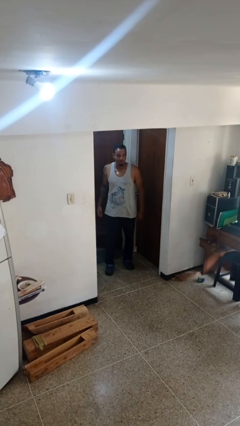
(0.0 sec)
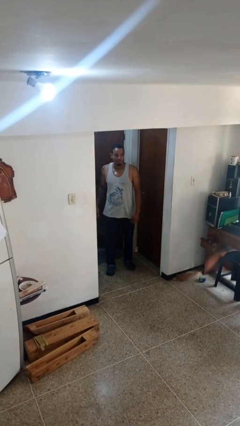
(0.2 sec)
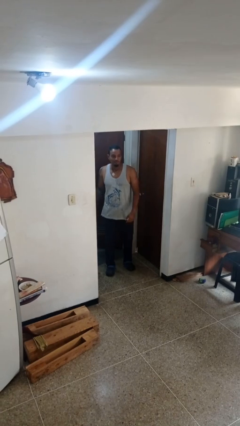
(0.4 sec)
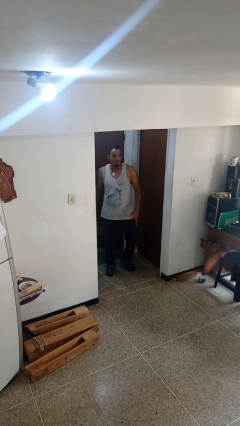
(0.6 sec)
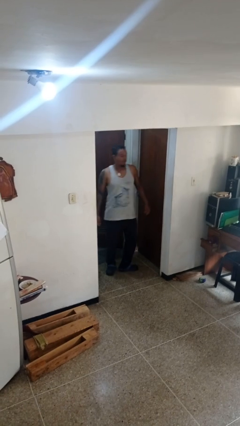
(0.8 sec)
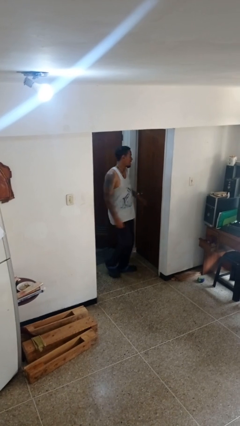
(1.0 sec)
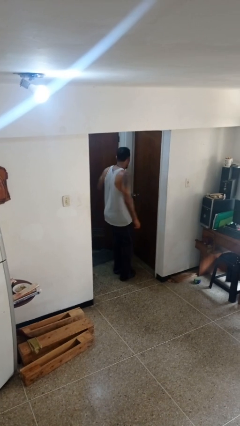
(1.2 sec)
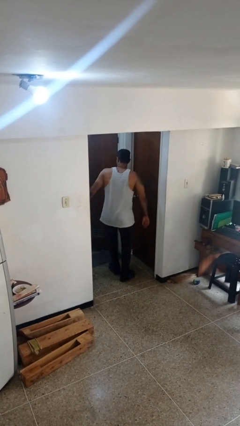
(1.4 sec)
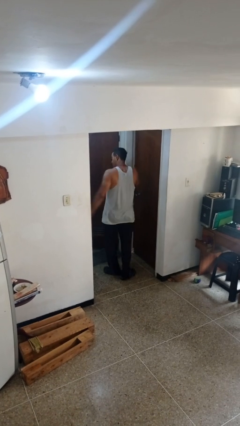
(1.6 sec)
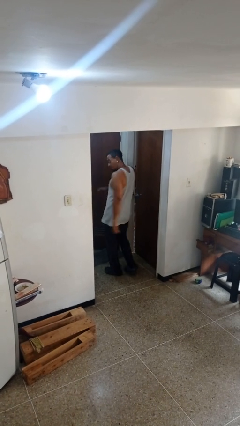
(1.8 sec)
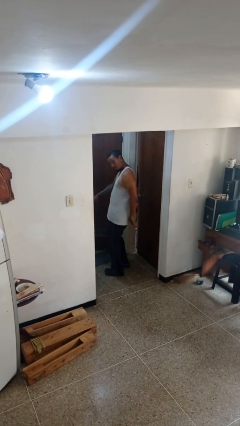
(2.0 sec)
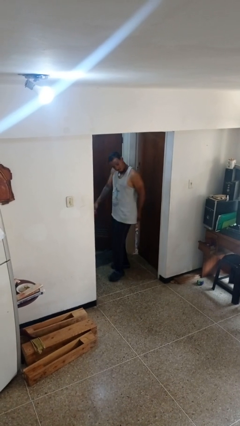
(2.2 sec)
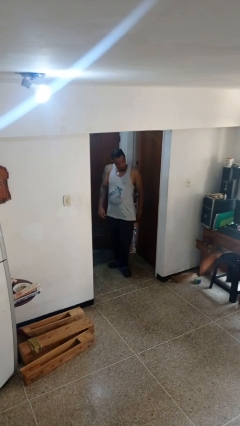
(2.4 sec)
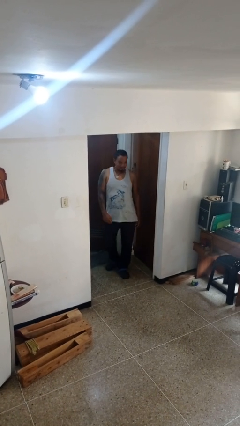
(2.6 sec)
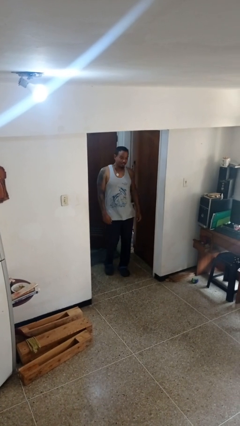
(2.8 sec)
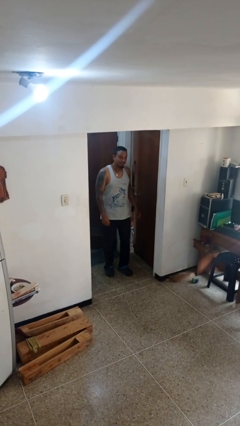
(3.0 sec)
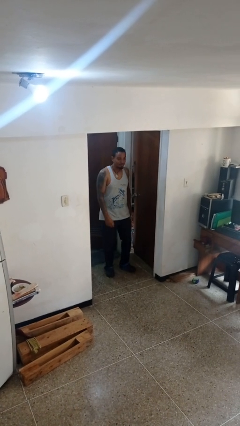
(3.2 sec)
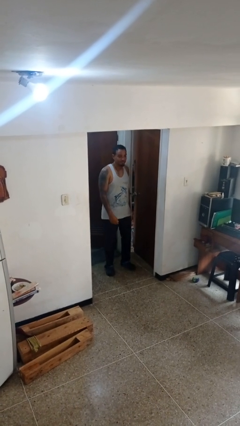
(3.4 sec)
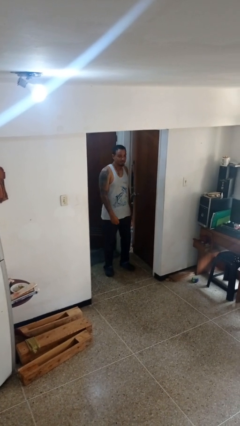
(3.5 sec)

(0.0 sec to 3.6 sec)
person twirls

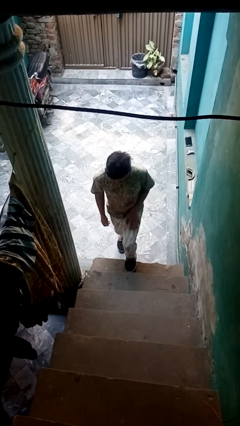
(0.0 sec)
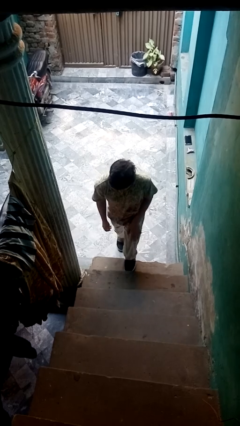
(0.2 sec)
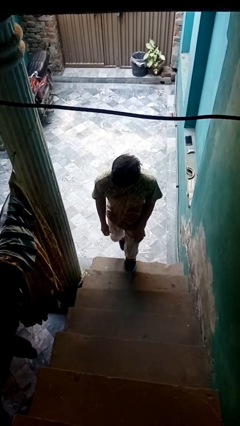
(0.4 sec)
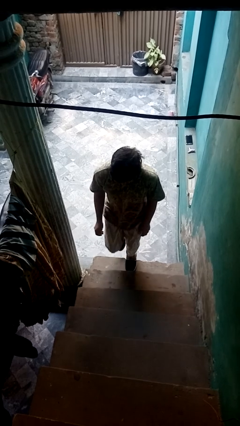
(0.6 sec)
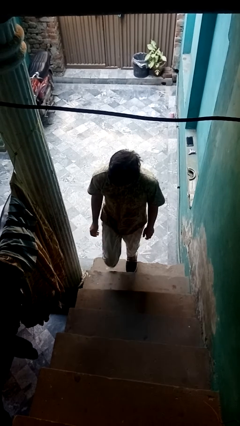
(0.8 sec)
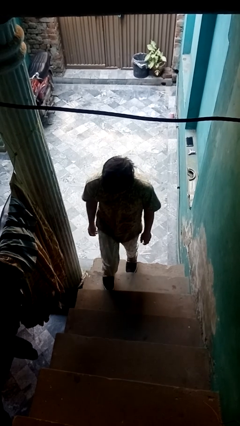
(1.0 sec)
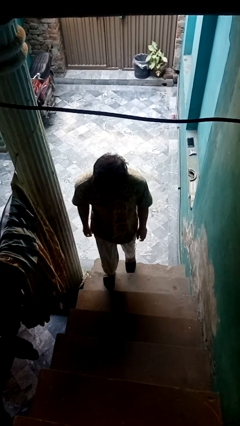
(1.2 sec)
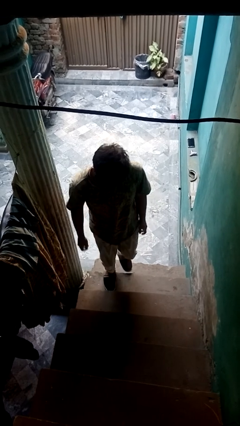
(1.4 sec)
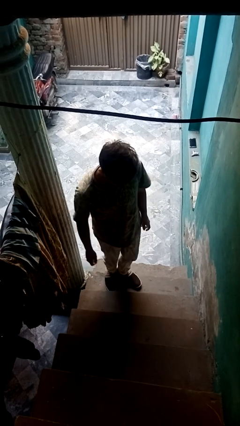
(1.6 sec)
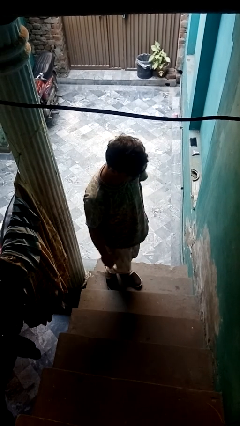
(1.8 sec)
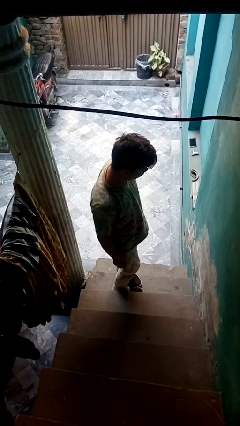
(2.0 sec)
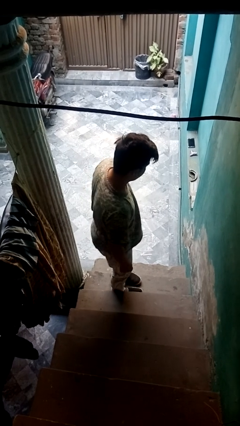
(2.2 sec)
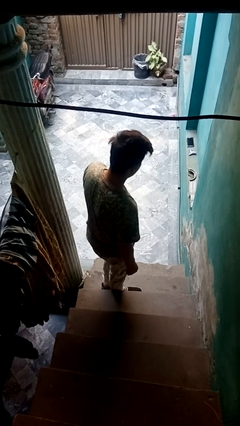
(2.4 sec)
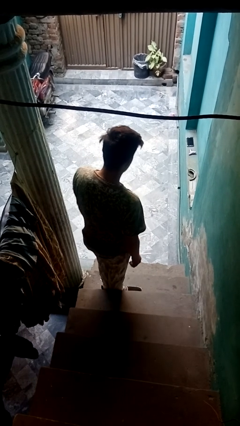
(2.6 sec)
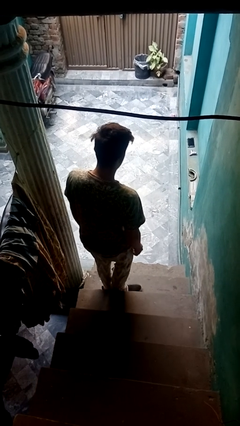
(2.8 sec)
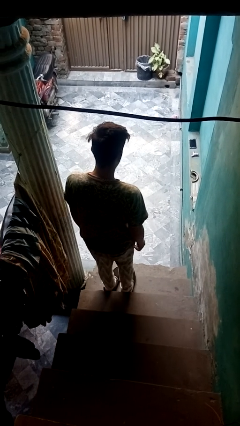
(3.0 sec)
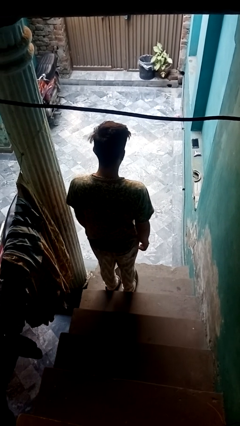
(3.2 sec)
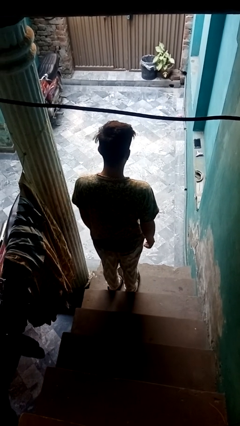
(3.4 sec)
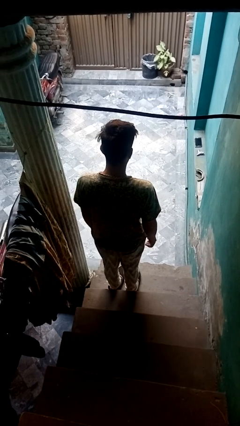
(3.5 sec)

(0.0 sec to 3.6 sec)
person climbs up stairs

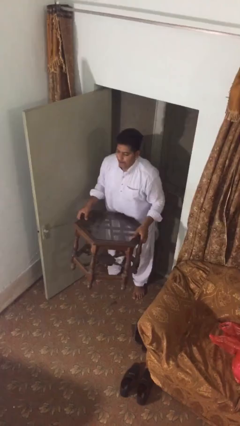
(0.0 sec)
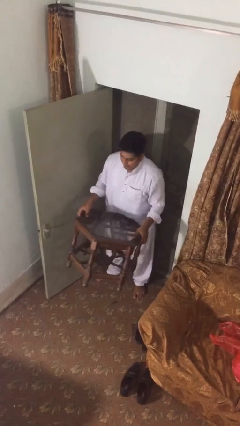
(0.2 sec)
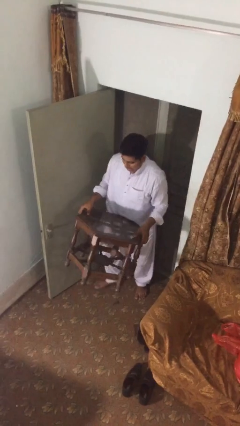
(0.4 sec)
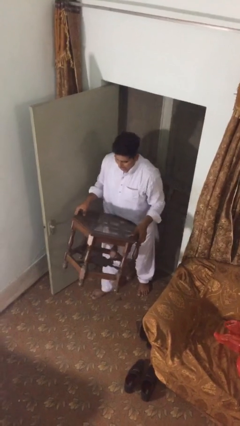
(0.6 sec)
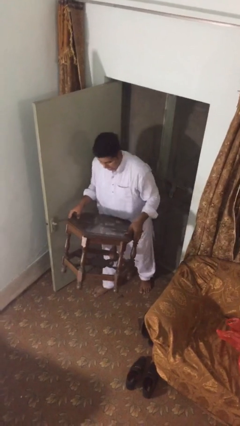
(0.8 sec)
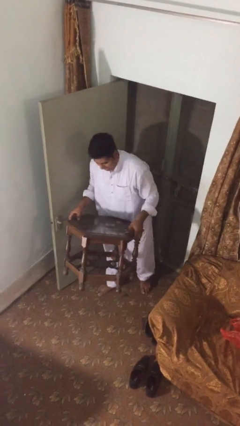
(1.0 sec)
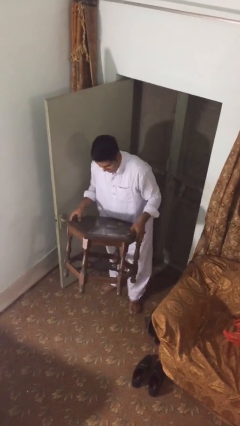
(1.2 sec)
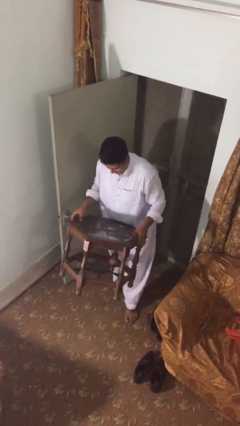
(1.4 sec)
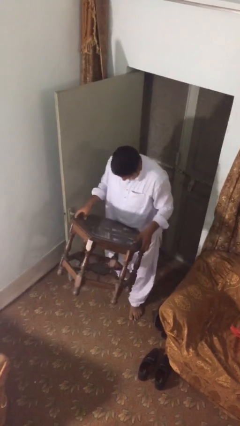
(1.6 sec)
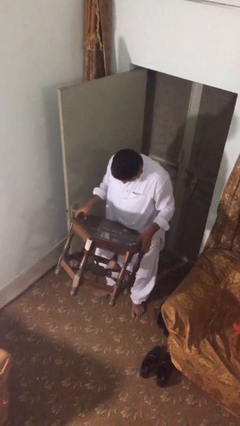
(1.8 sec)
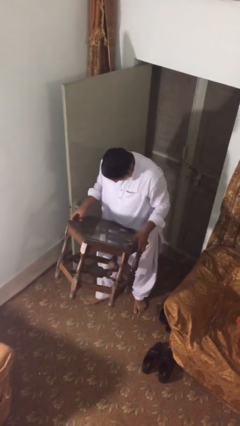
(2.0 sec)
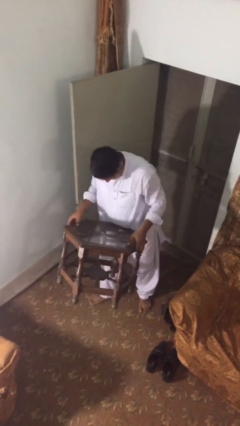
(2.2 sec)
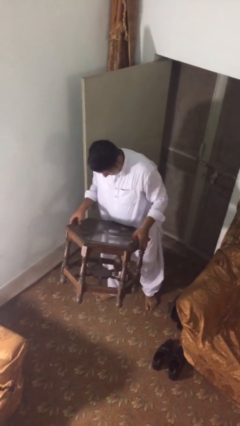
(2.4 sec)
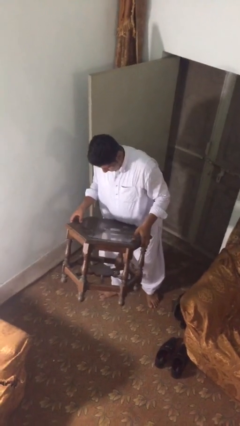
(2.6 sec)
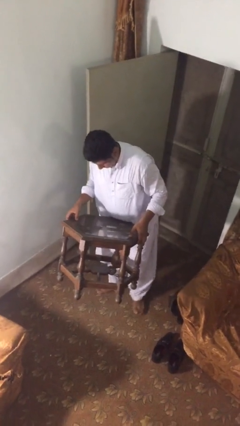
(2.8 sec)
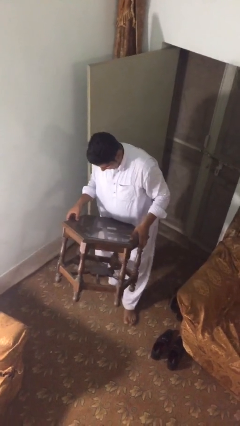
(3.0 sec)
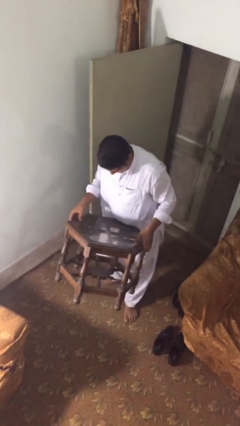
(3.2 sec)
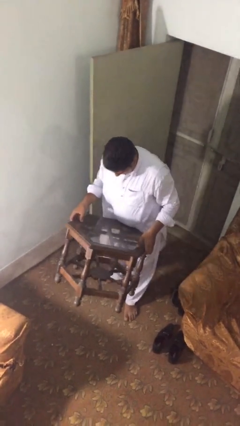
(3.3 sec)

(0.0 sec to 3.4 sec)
person carries heavy object

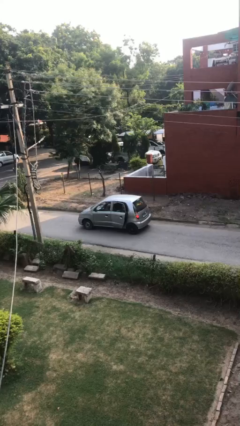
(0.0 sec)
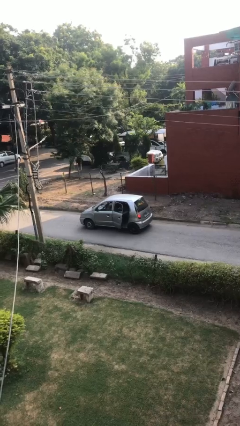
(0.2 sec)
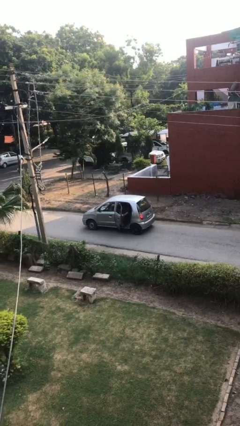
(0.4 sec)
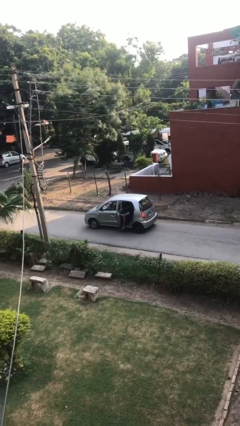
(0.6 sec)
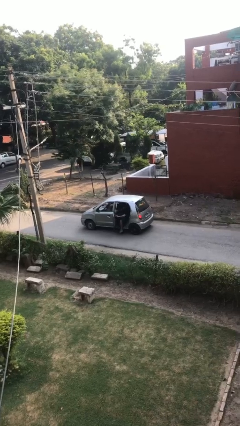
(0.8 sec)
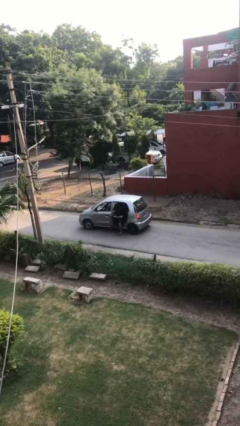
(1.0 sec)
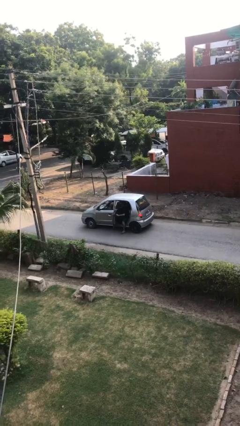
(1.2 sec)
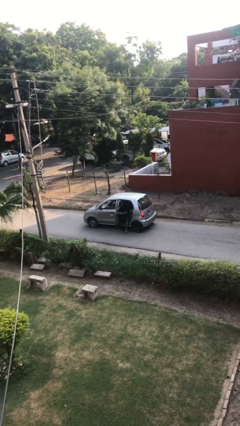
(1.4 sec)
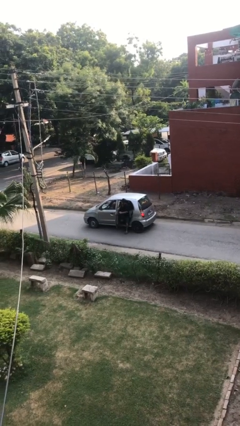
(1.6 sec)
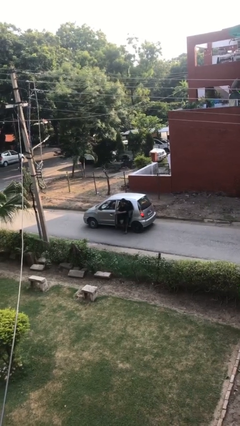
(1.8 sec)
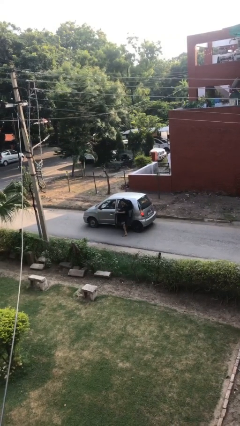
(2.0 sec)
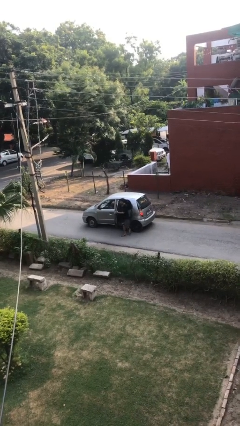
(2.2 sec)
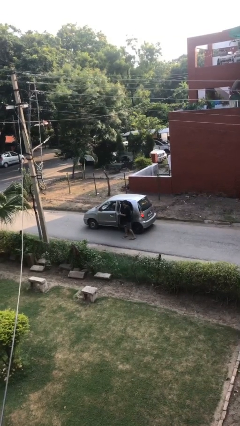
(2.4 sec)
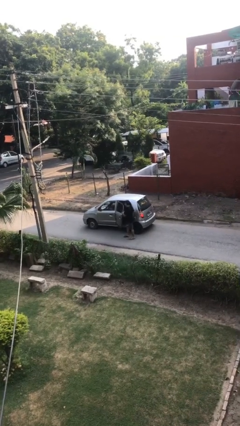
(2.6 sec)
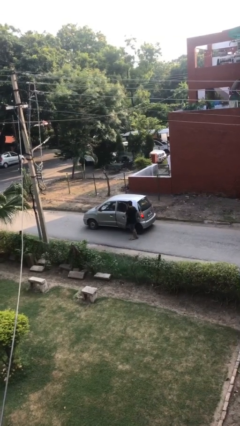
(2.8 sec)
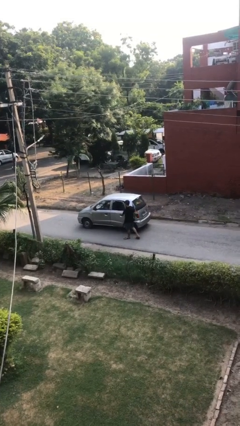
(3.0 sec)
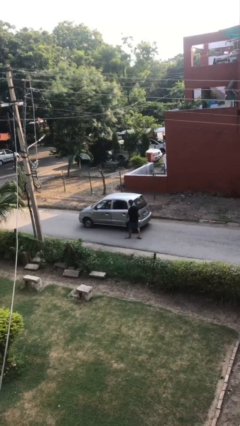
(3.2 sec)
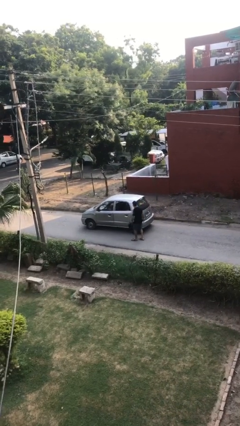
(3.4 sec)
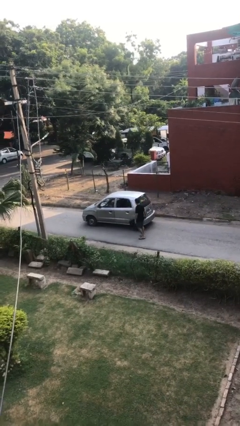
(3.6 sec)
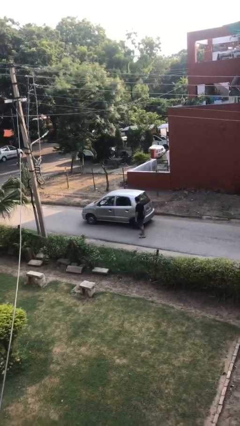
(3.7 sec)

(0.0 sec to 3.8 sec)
car drops off person

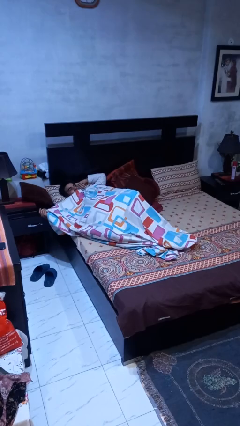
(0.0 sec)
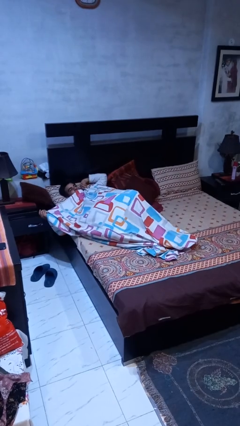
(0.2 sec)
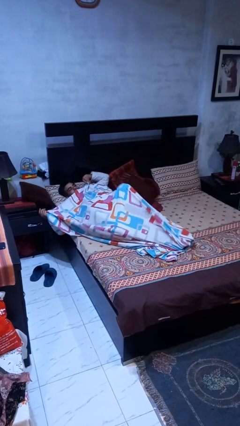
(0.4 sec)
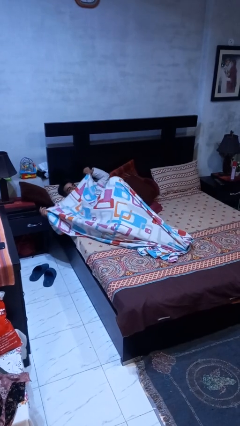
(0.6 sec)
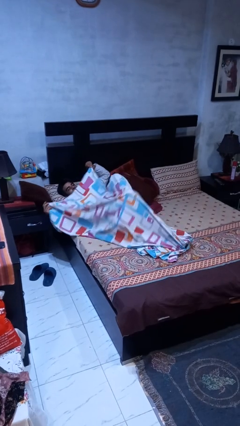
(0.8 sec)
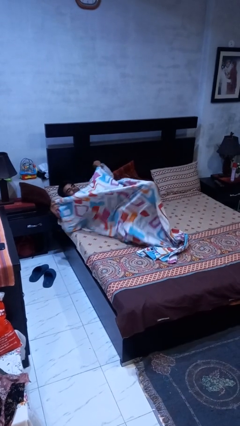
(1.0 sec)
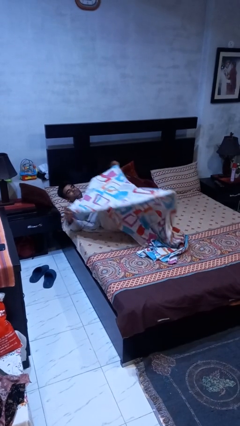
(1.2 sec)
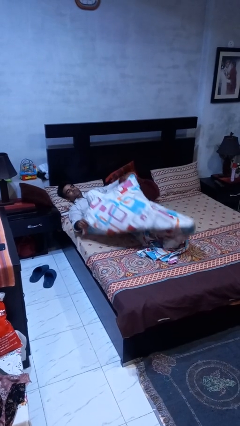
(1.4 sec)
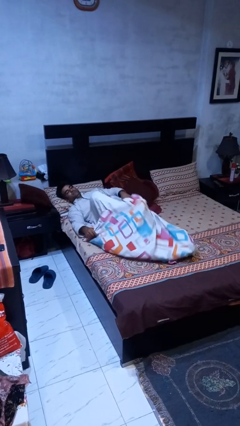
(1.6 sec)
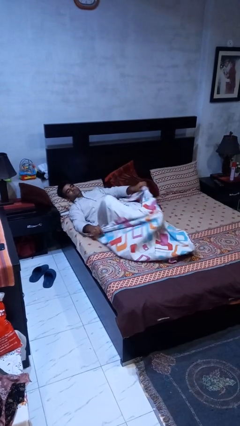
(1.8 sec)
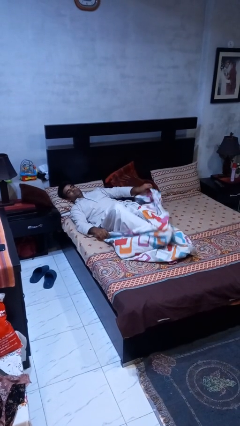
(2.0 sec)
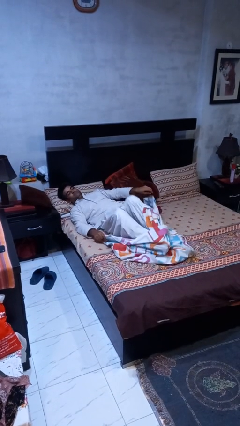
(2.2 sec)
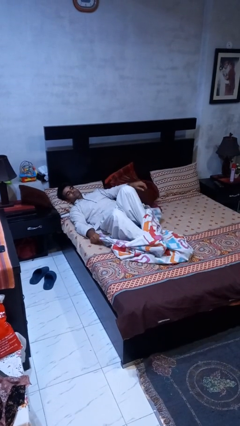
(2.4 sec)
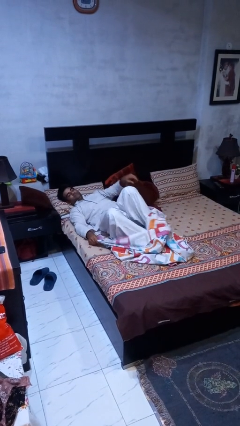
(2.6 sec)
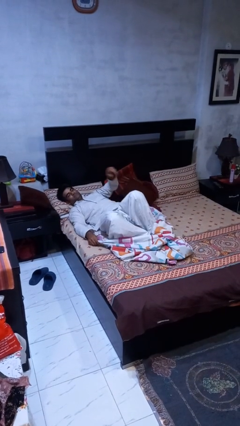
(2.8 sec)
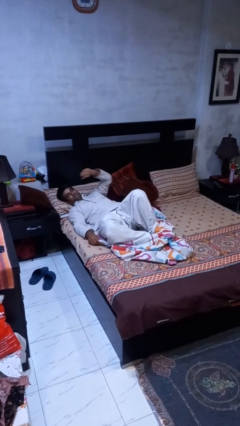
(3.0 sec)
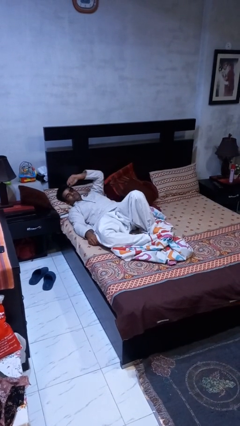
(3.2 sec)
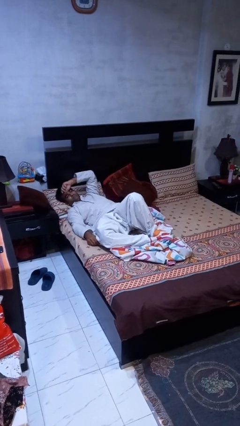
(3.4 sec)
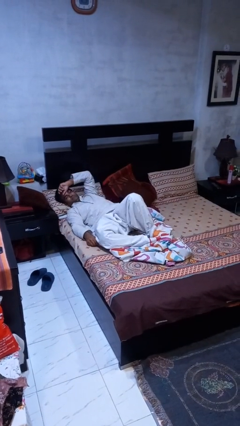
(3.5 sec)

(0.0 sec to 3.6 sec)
person uncovers with bedsheets
